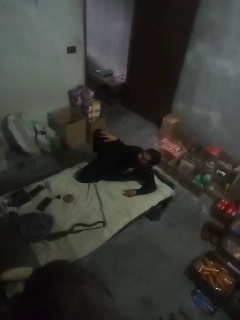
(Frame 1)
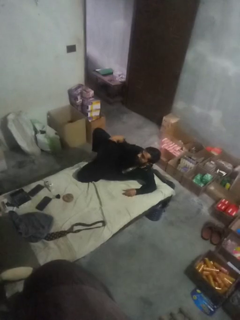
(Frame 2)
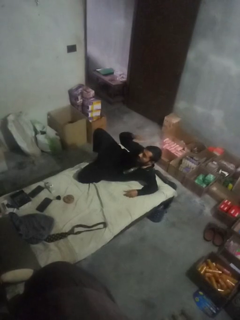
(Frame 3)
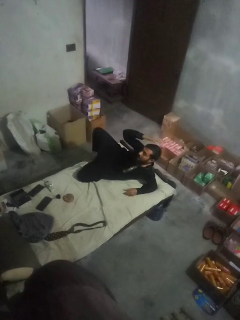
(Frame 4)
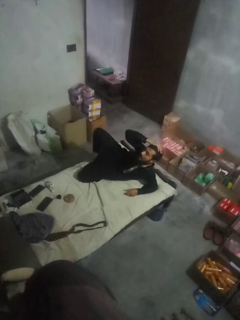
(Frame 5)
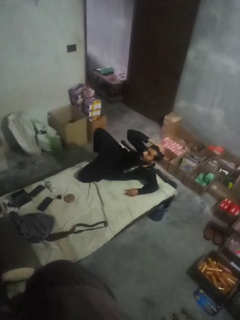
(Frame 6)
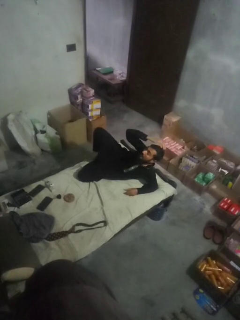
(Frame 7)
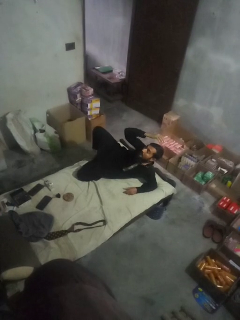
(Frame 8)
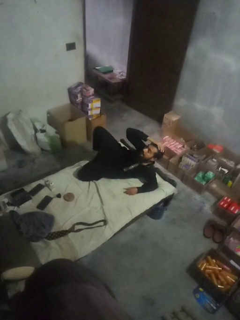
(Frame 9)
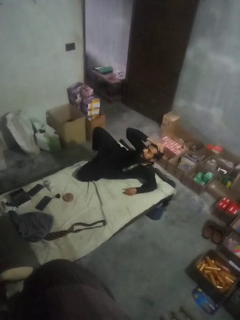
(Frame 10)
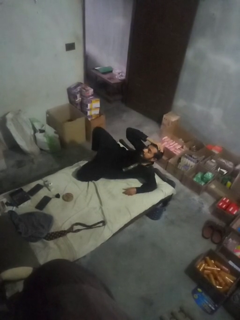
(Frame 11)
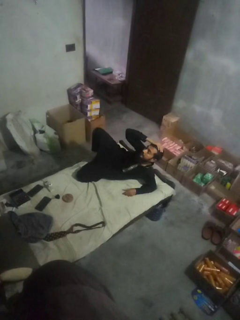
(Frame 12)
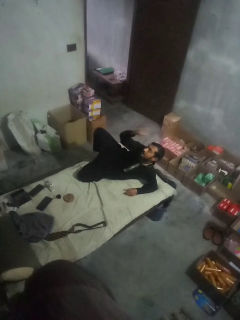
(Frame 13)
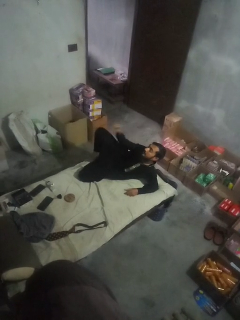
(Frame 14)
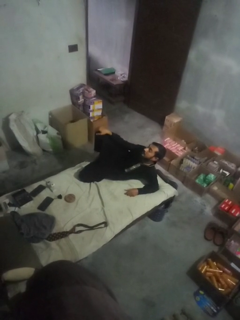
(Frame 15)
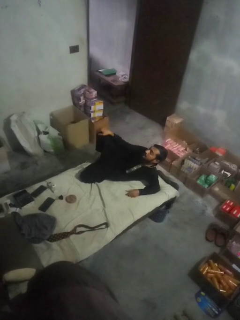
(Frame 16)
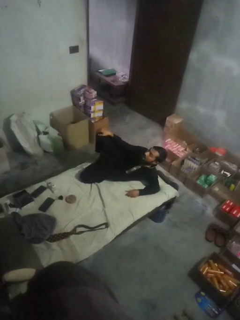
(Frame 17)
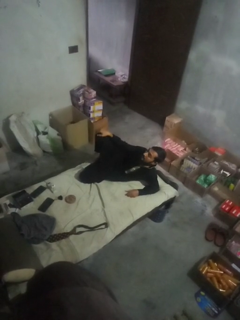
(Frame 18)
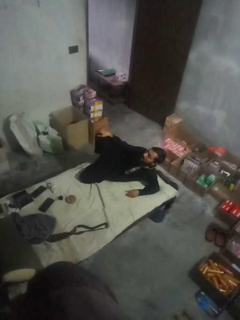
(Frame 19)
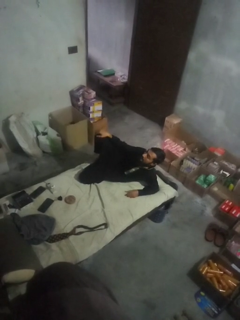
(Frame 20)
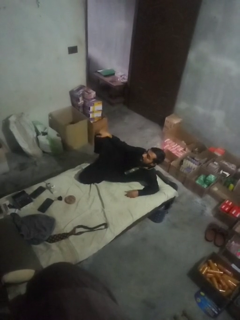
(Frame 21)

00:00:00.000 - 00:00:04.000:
person pats head

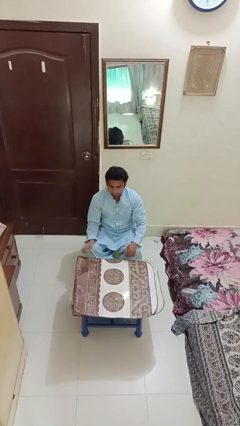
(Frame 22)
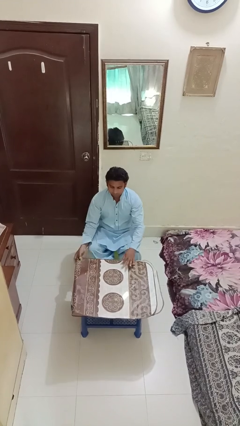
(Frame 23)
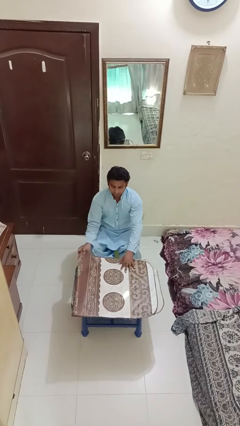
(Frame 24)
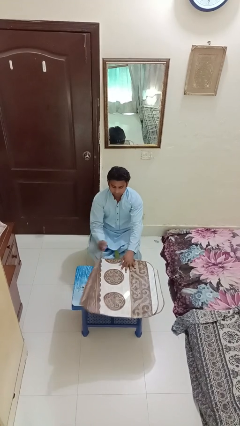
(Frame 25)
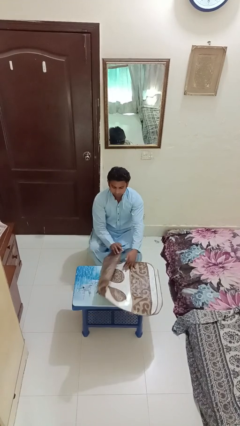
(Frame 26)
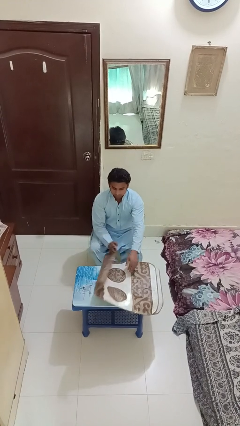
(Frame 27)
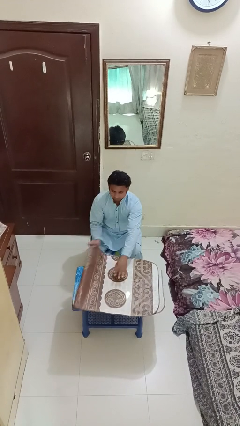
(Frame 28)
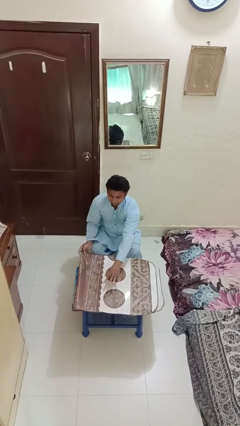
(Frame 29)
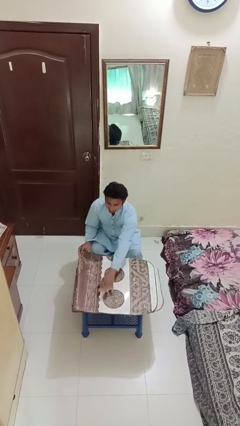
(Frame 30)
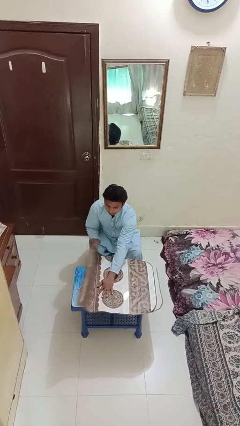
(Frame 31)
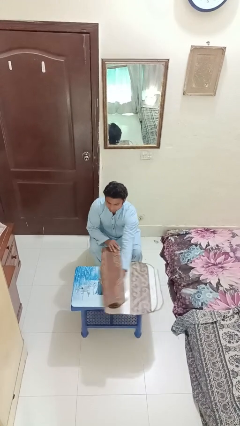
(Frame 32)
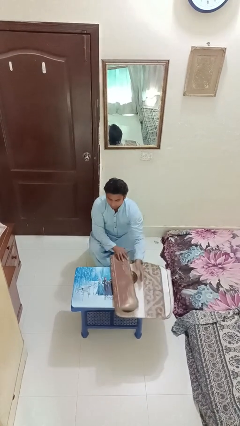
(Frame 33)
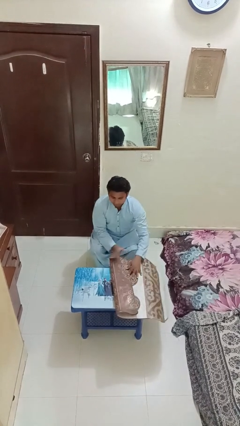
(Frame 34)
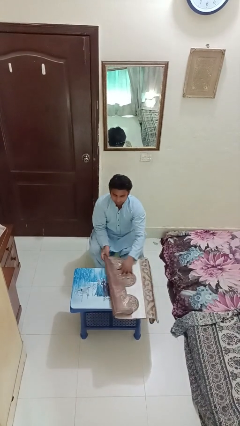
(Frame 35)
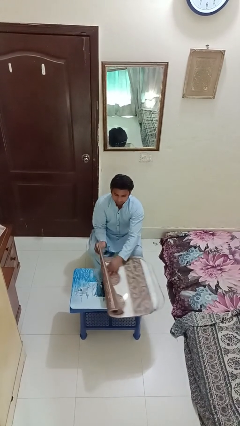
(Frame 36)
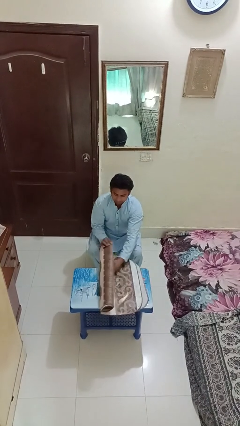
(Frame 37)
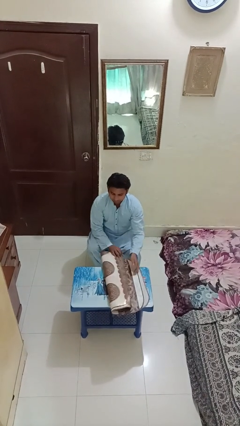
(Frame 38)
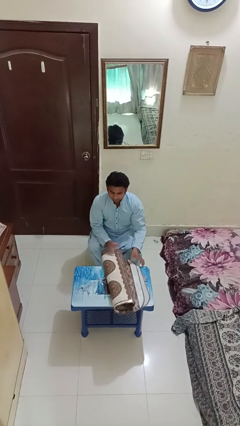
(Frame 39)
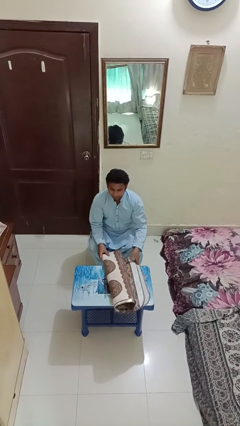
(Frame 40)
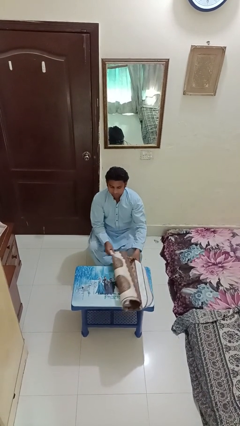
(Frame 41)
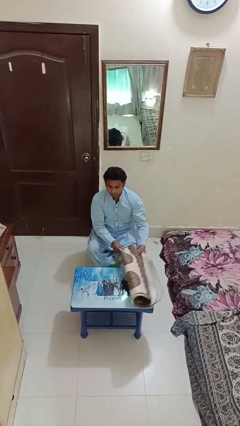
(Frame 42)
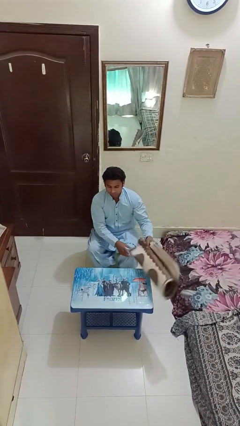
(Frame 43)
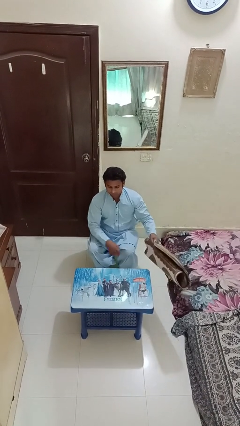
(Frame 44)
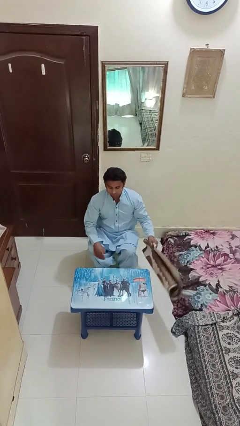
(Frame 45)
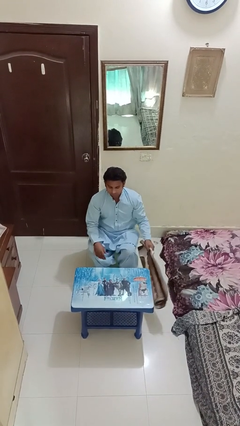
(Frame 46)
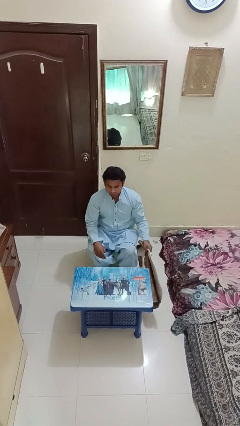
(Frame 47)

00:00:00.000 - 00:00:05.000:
person folds tablecloth

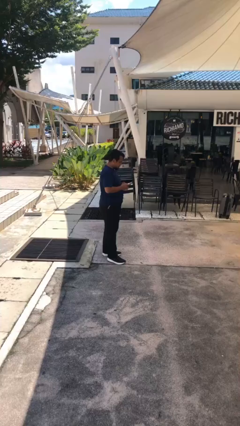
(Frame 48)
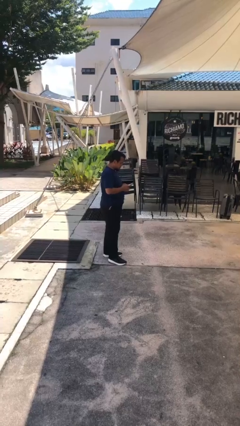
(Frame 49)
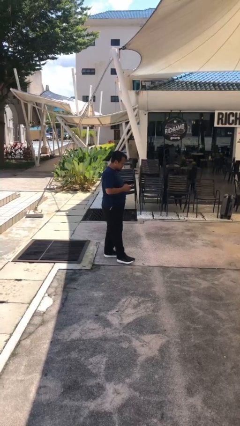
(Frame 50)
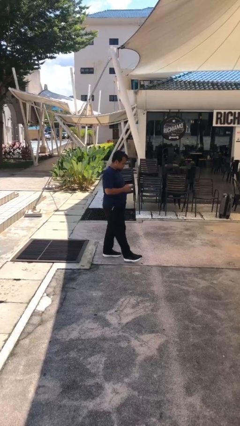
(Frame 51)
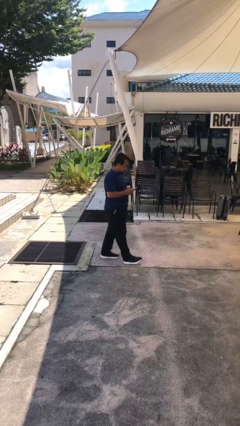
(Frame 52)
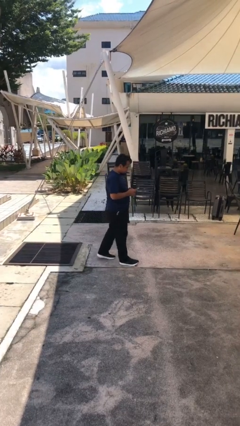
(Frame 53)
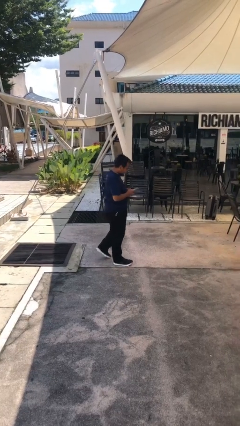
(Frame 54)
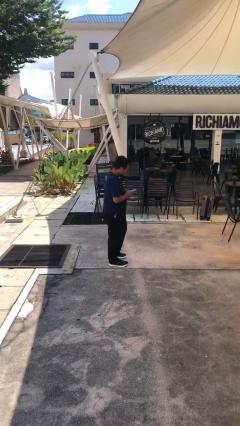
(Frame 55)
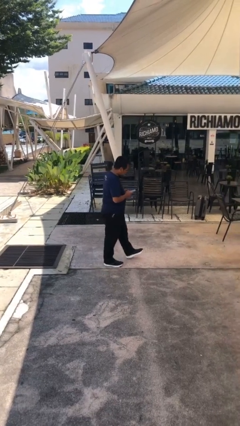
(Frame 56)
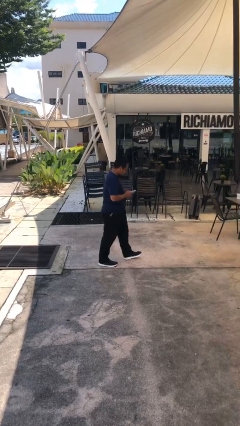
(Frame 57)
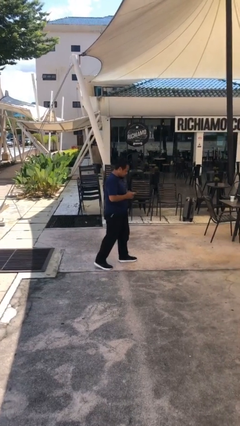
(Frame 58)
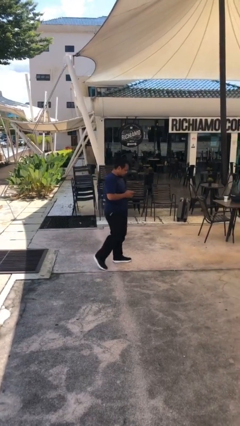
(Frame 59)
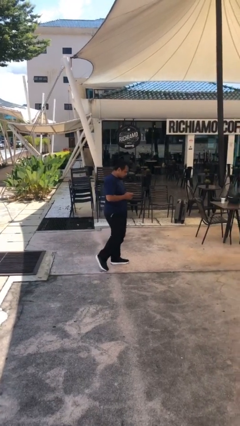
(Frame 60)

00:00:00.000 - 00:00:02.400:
person texts on phone

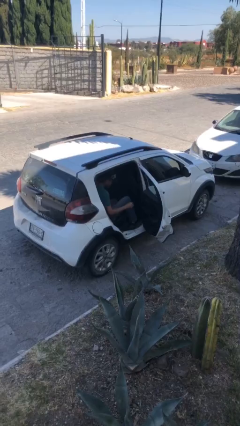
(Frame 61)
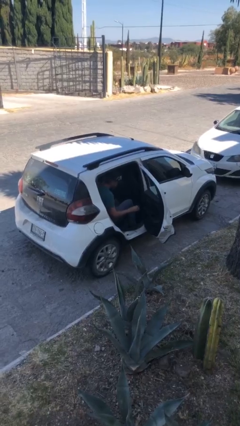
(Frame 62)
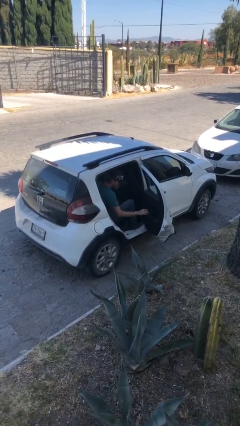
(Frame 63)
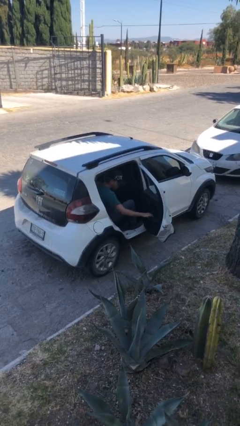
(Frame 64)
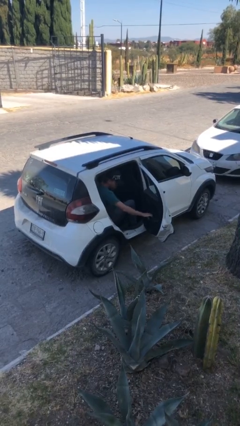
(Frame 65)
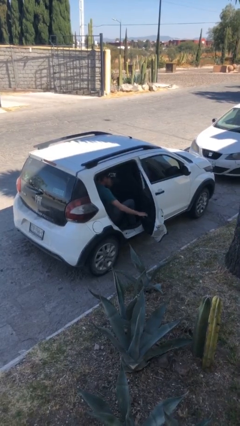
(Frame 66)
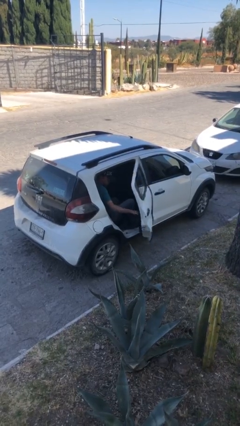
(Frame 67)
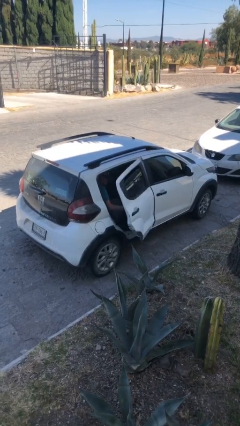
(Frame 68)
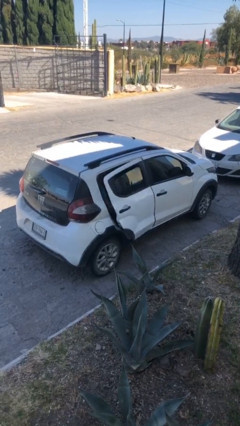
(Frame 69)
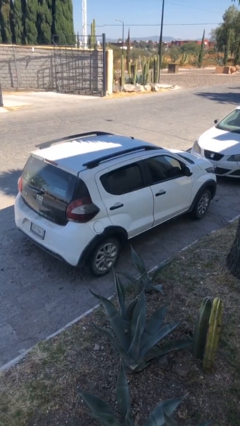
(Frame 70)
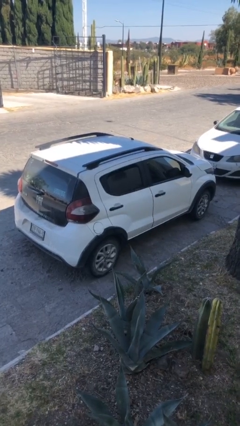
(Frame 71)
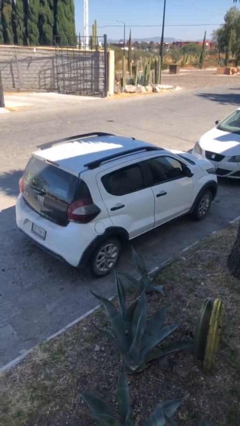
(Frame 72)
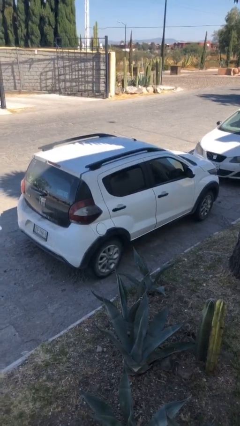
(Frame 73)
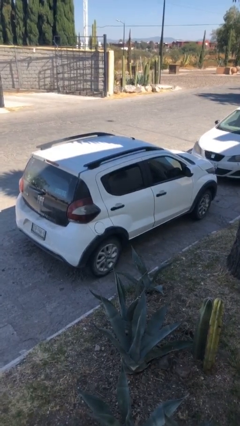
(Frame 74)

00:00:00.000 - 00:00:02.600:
person closes car door

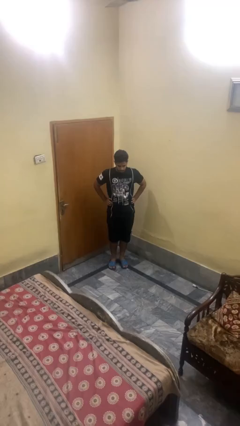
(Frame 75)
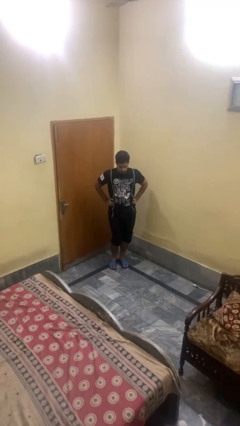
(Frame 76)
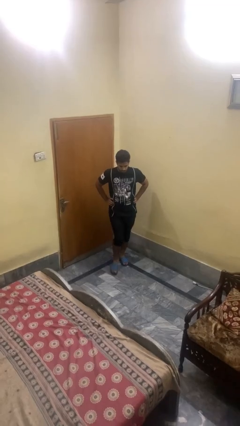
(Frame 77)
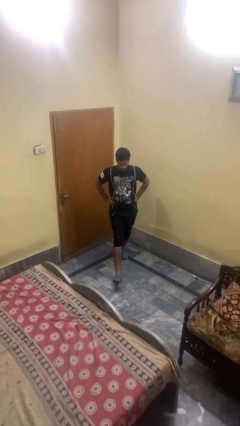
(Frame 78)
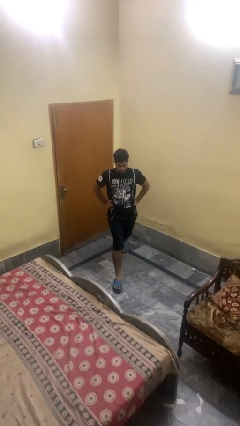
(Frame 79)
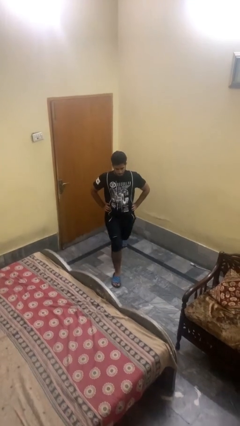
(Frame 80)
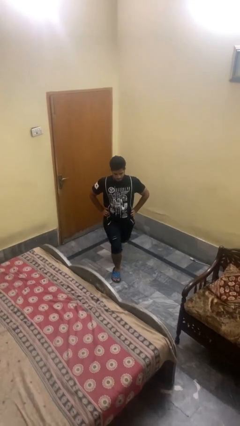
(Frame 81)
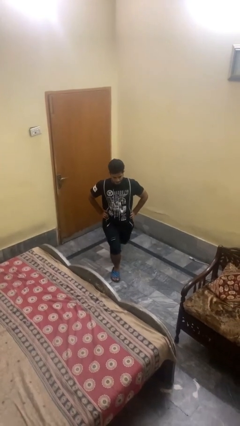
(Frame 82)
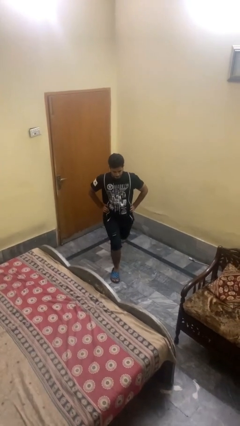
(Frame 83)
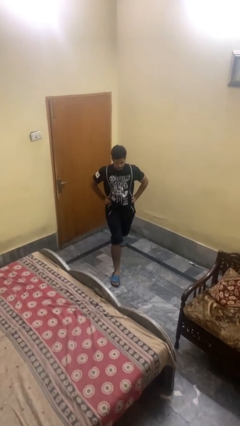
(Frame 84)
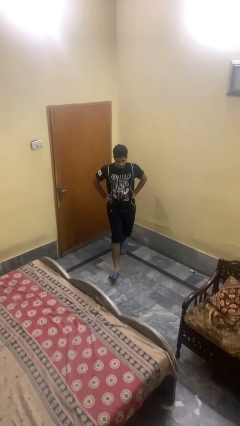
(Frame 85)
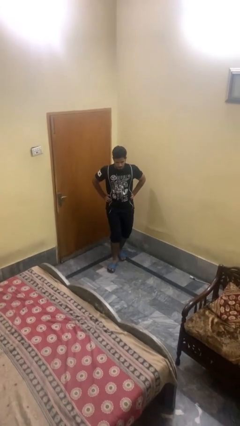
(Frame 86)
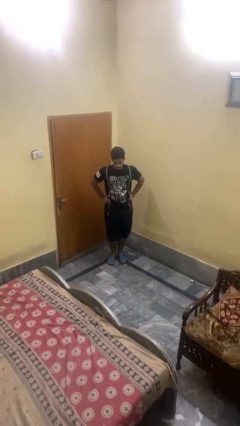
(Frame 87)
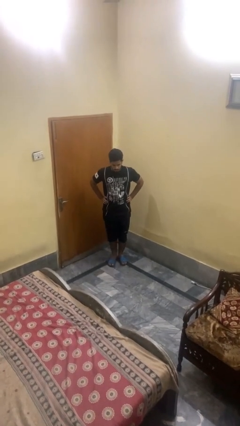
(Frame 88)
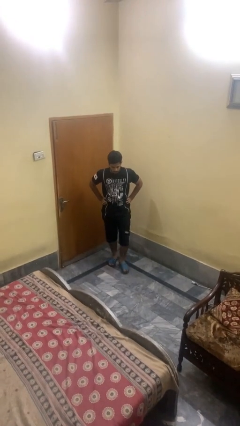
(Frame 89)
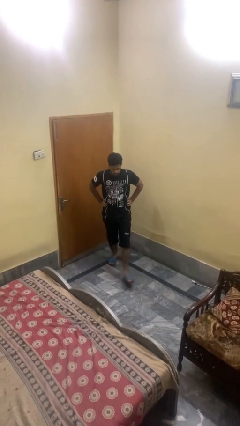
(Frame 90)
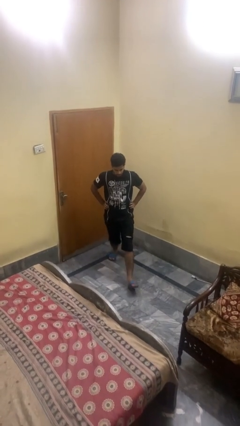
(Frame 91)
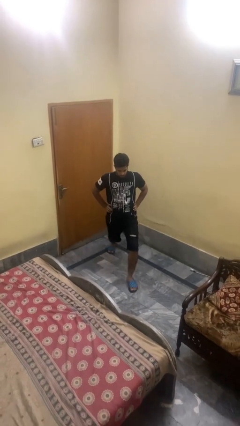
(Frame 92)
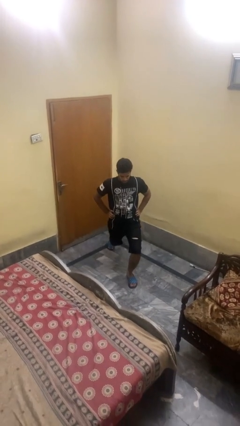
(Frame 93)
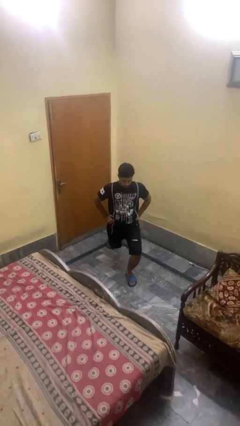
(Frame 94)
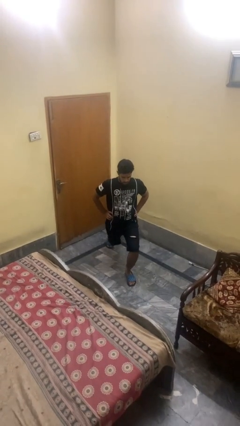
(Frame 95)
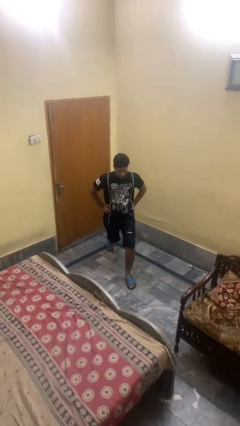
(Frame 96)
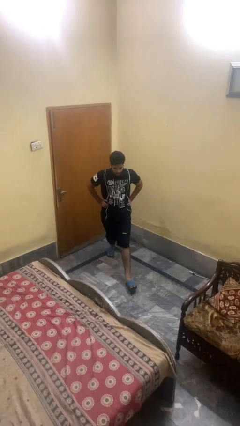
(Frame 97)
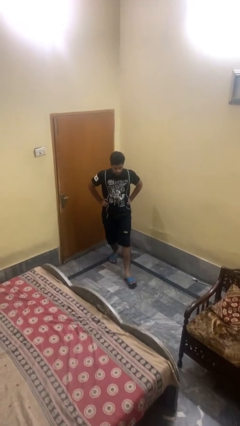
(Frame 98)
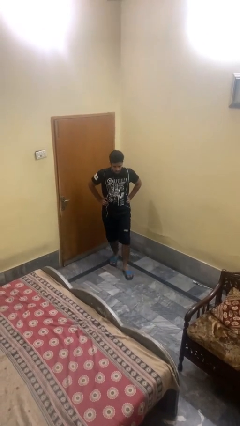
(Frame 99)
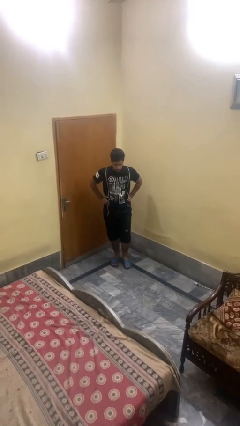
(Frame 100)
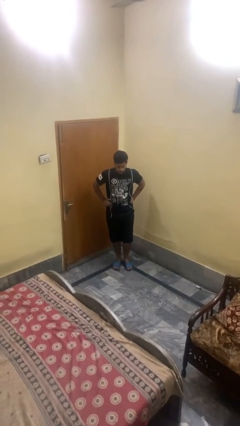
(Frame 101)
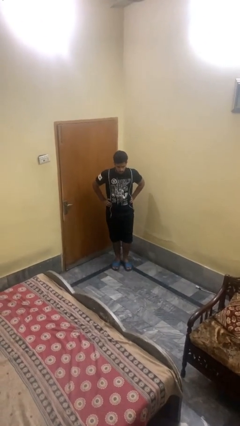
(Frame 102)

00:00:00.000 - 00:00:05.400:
person exercises with lunges
